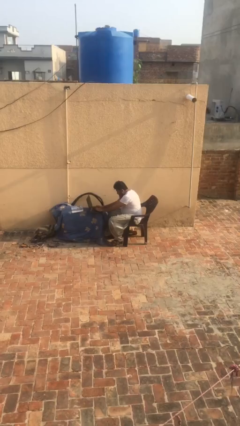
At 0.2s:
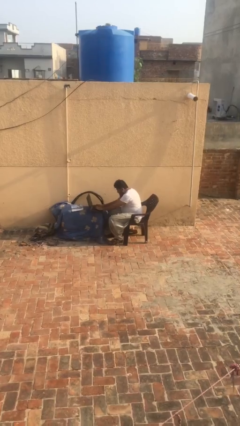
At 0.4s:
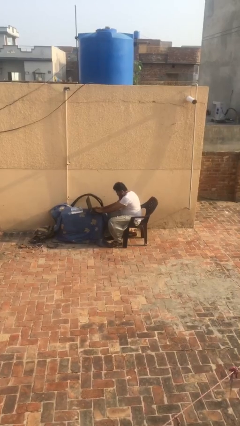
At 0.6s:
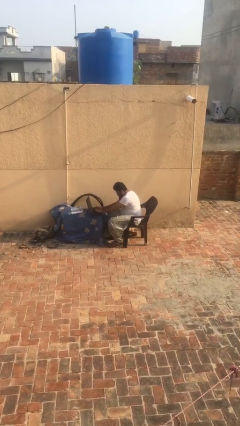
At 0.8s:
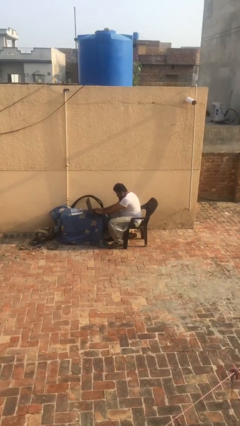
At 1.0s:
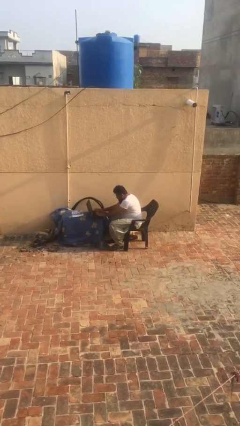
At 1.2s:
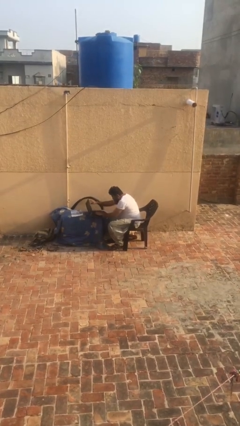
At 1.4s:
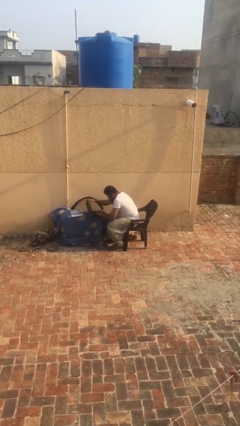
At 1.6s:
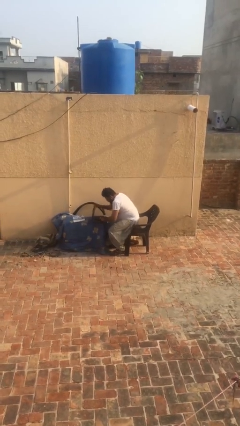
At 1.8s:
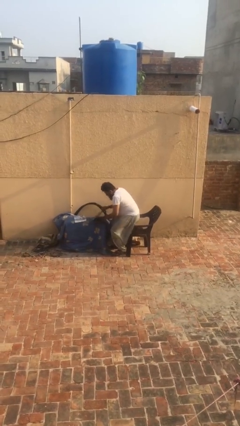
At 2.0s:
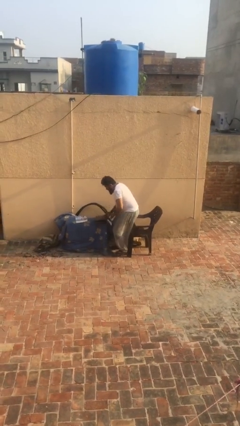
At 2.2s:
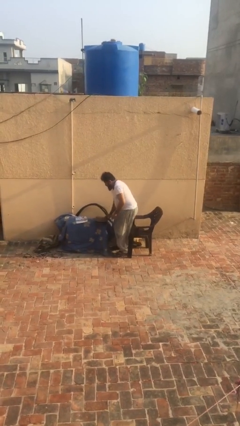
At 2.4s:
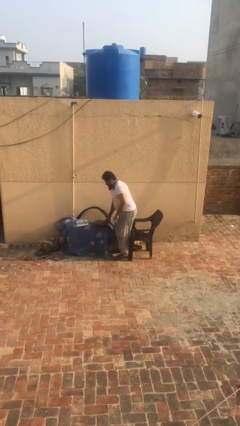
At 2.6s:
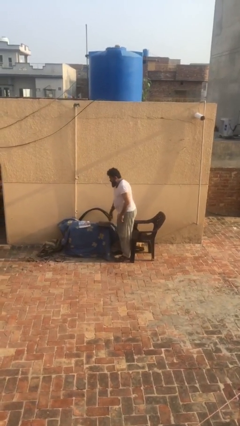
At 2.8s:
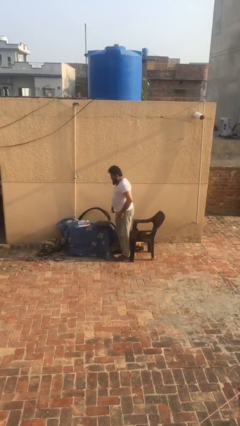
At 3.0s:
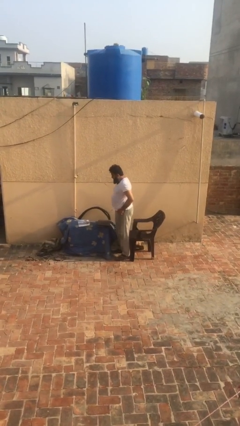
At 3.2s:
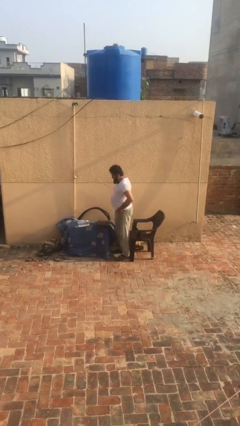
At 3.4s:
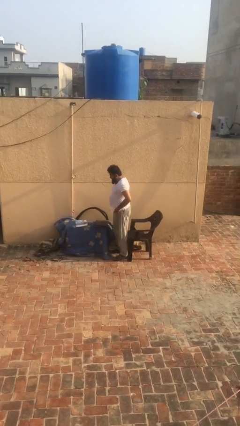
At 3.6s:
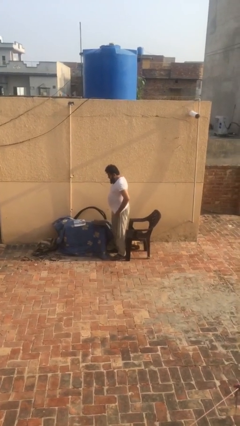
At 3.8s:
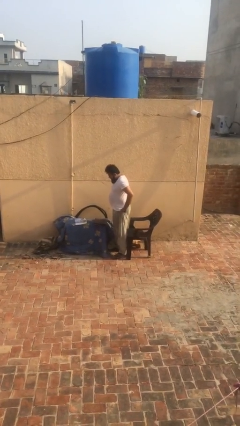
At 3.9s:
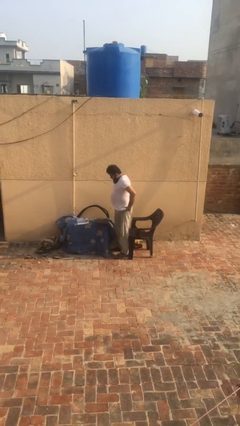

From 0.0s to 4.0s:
person stands up

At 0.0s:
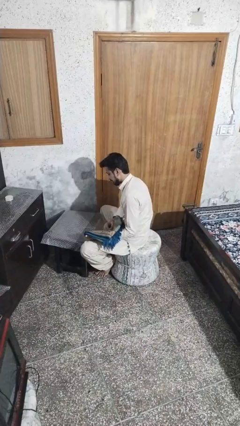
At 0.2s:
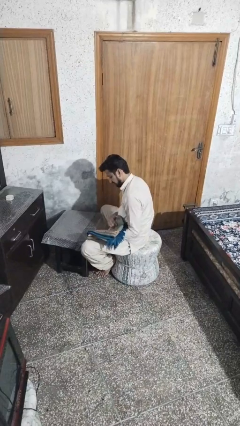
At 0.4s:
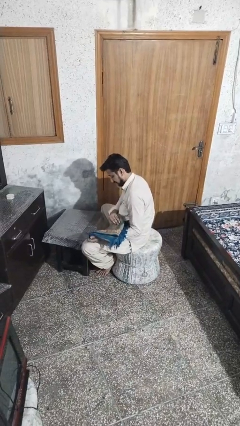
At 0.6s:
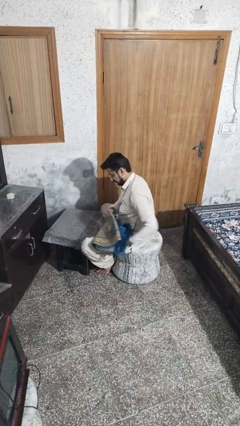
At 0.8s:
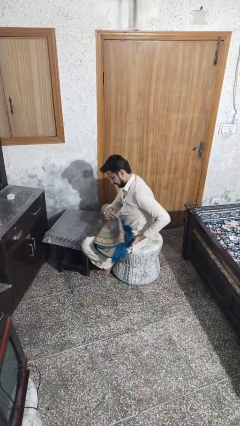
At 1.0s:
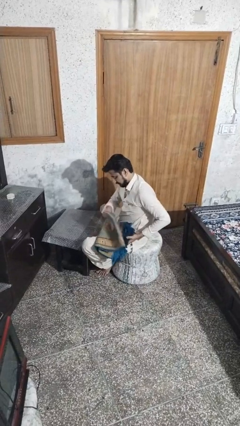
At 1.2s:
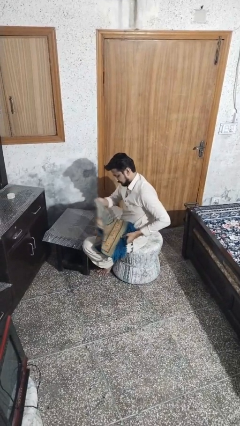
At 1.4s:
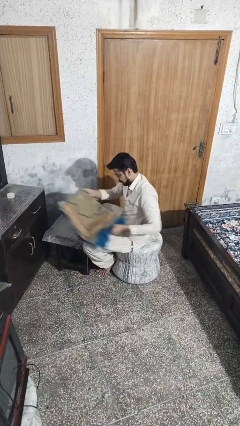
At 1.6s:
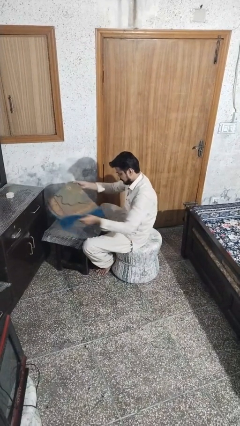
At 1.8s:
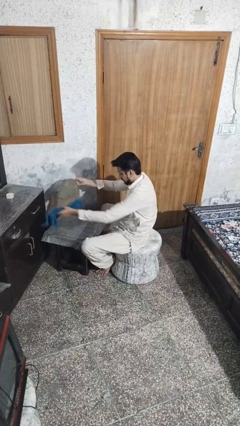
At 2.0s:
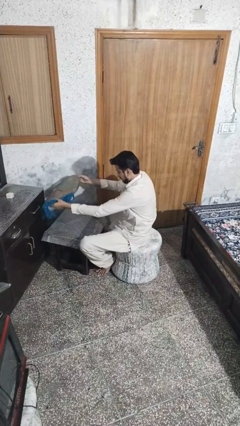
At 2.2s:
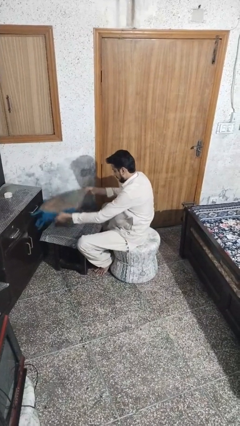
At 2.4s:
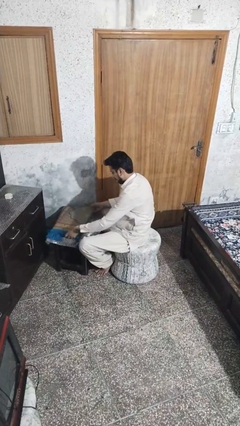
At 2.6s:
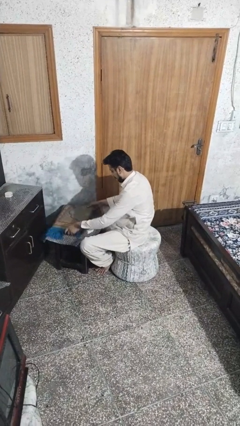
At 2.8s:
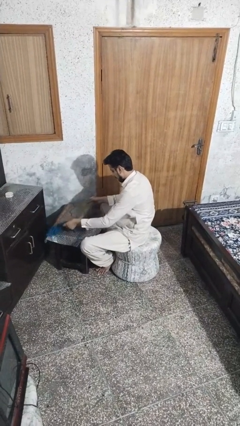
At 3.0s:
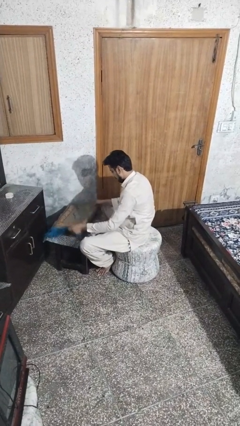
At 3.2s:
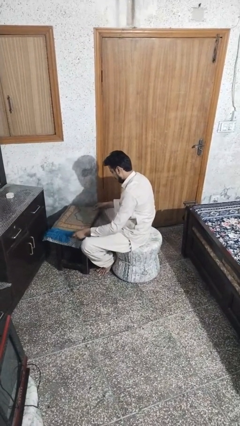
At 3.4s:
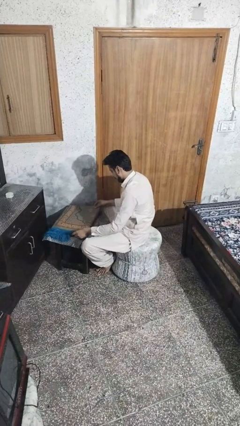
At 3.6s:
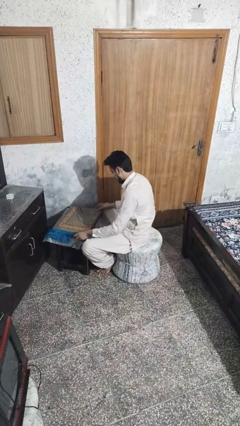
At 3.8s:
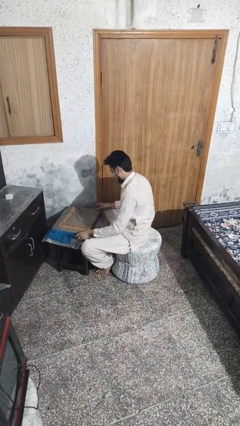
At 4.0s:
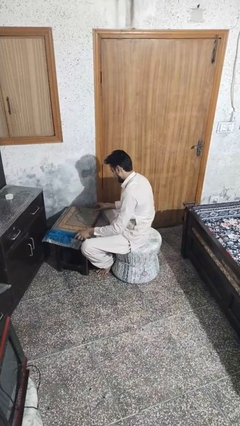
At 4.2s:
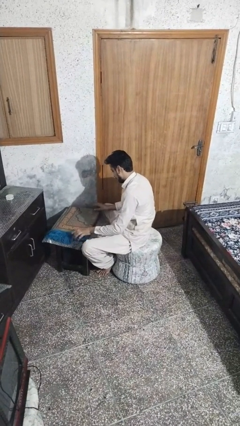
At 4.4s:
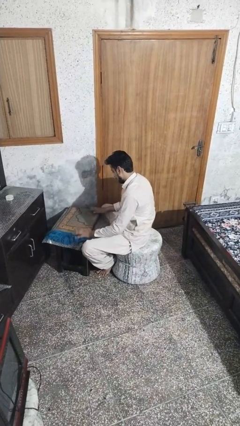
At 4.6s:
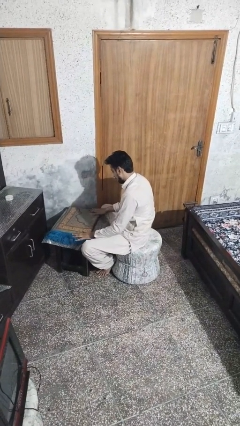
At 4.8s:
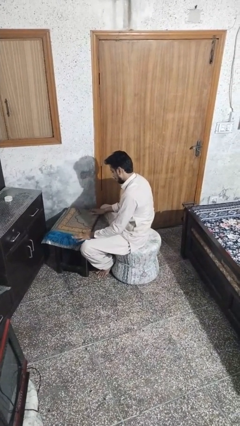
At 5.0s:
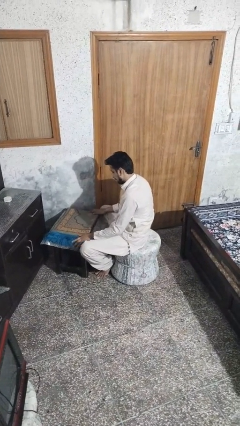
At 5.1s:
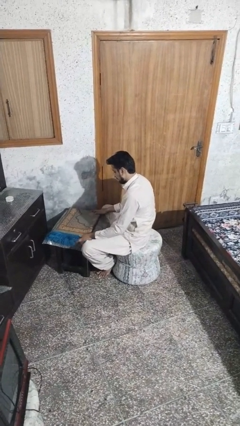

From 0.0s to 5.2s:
person spreads tablecloth

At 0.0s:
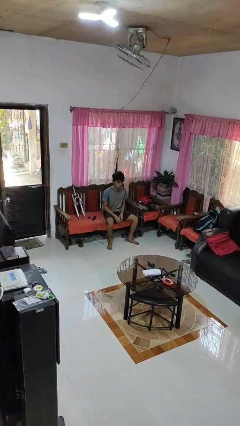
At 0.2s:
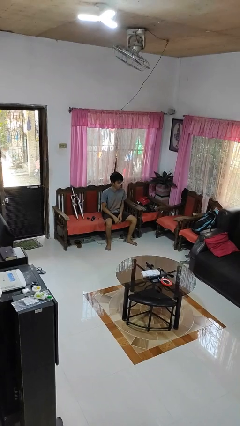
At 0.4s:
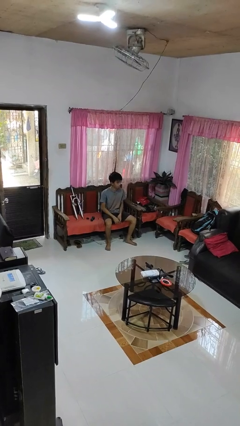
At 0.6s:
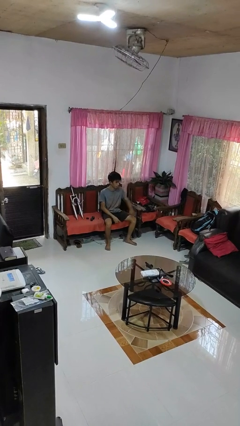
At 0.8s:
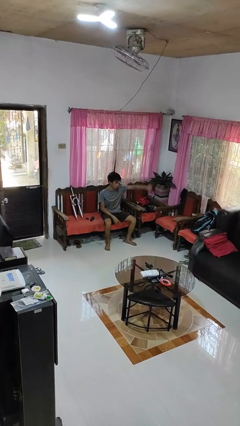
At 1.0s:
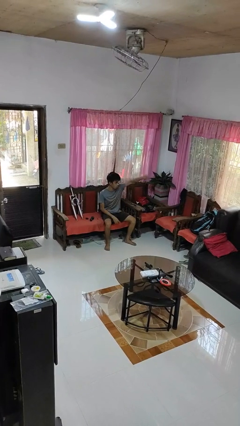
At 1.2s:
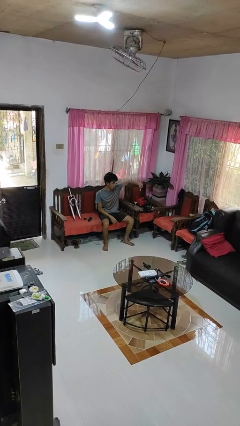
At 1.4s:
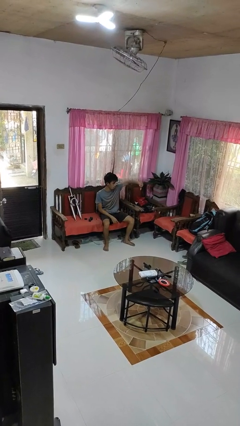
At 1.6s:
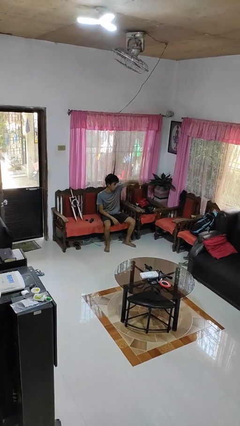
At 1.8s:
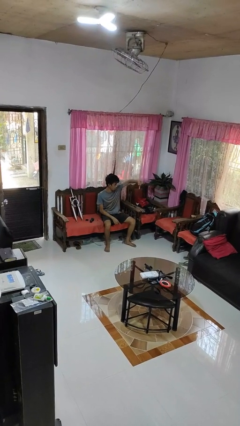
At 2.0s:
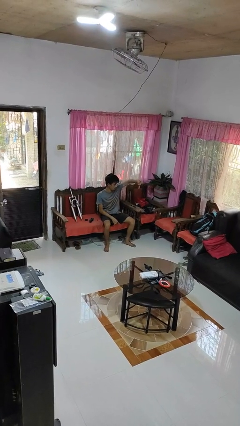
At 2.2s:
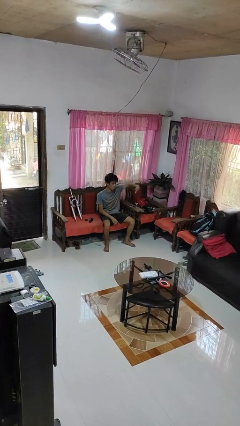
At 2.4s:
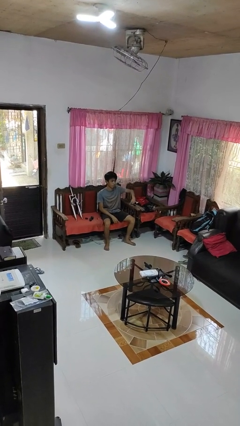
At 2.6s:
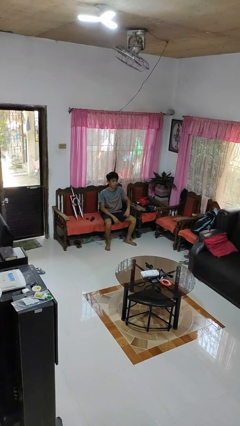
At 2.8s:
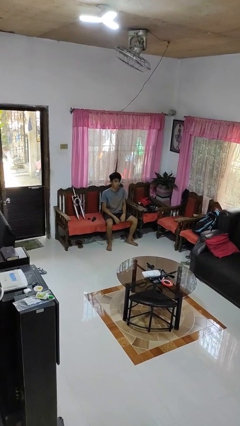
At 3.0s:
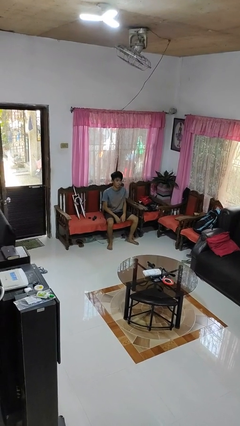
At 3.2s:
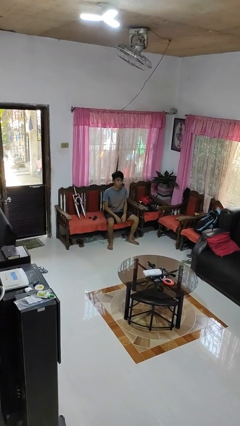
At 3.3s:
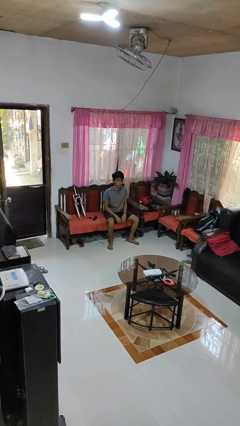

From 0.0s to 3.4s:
person gestures thumbs down

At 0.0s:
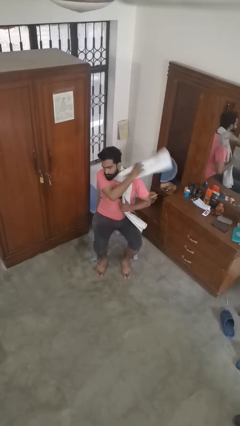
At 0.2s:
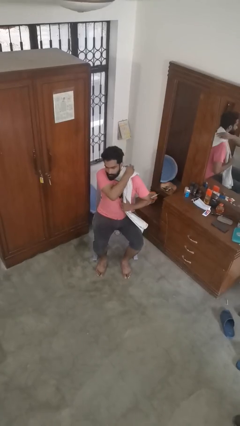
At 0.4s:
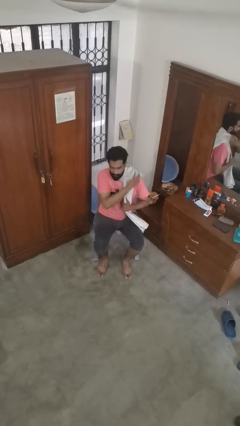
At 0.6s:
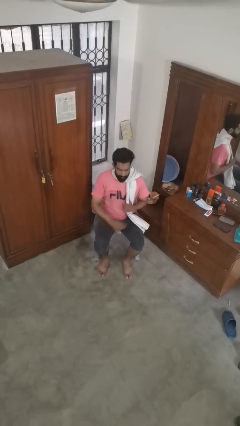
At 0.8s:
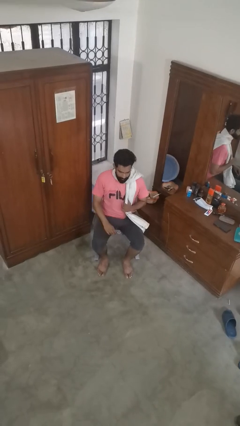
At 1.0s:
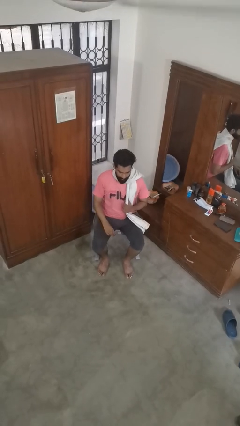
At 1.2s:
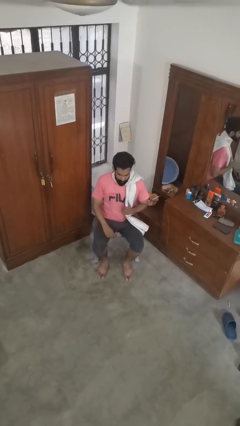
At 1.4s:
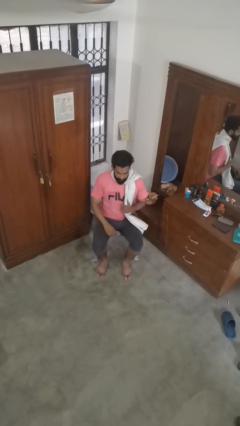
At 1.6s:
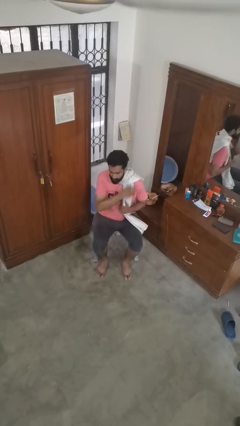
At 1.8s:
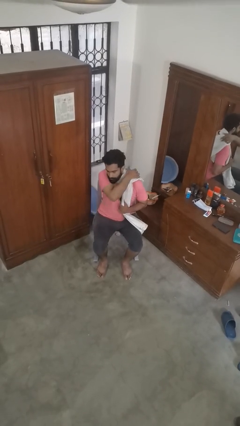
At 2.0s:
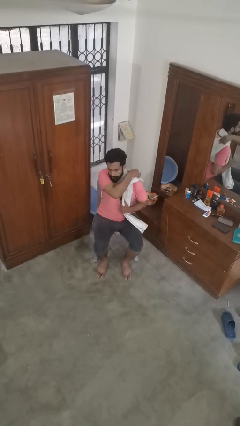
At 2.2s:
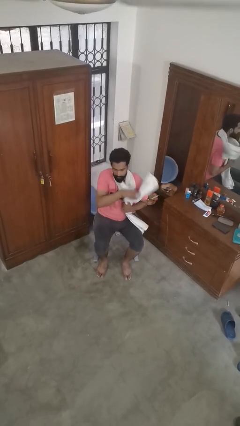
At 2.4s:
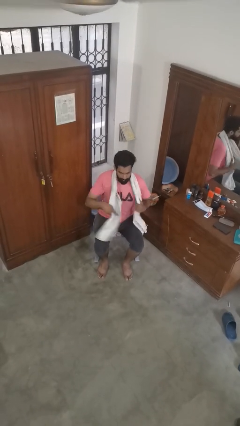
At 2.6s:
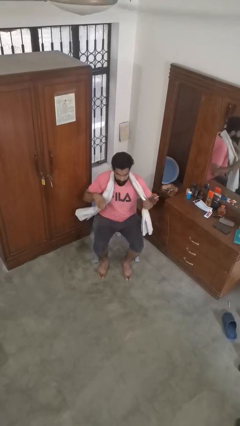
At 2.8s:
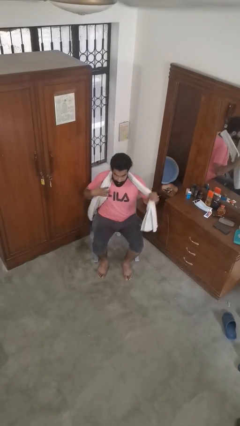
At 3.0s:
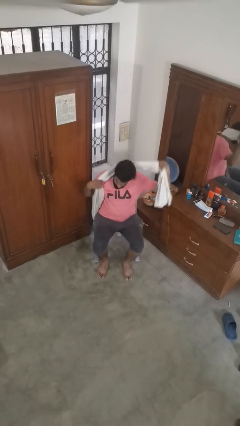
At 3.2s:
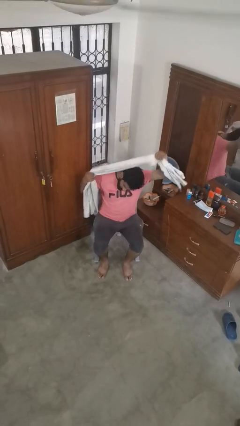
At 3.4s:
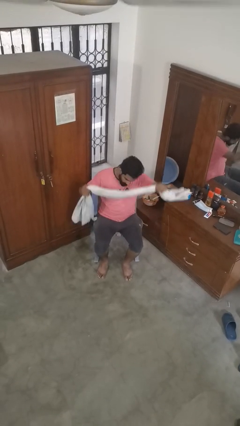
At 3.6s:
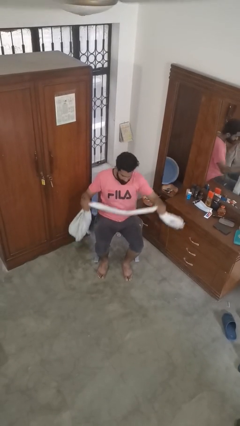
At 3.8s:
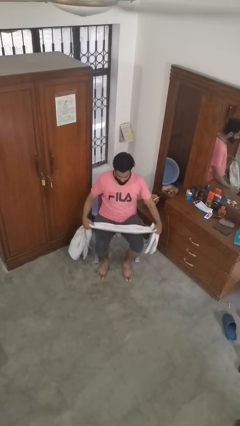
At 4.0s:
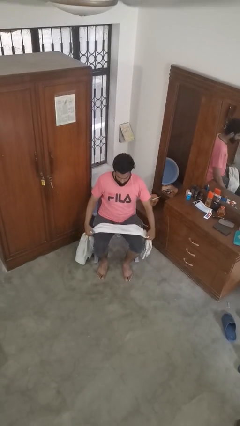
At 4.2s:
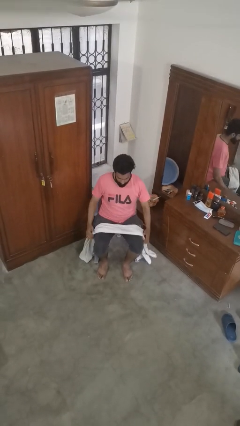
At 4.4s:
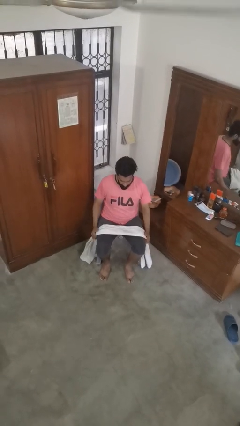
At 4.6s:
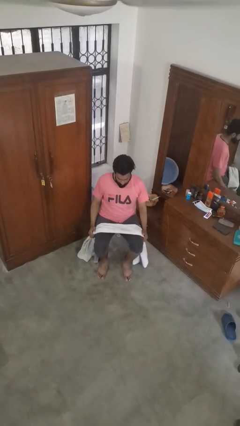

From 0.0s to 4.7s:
person takes off scarf

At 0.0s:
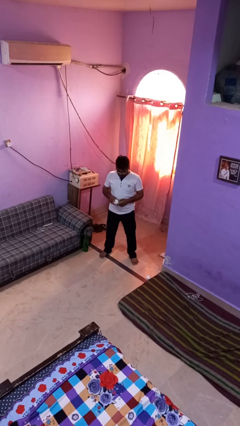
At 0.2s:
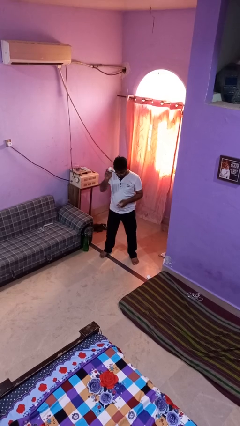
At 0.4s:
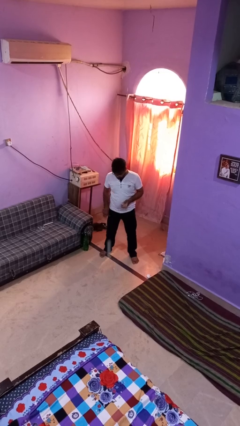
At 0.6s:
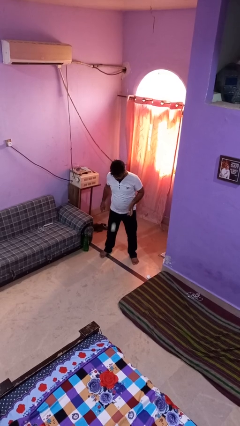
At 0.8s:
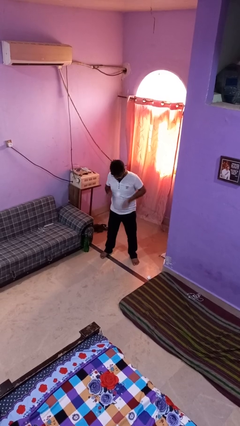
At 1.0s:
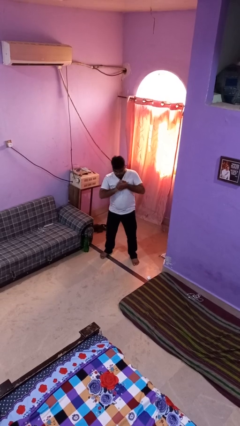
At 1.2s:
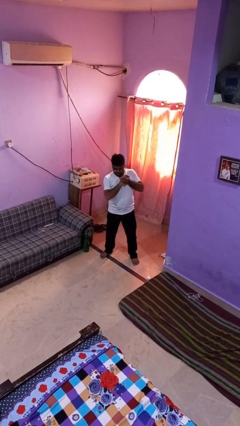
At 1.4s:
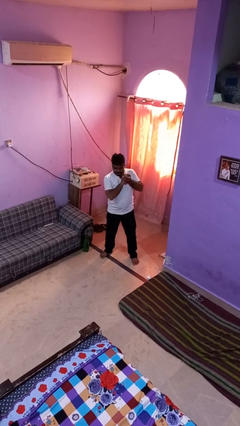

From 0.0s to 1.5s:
person bounces ball on floor
